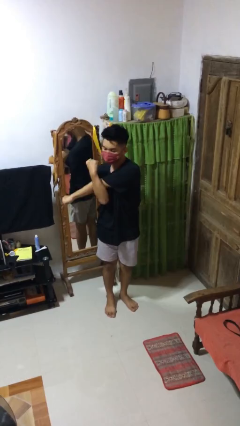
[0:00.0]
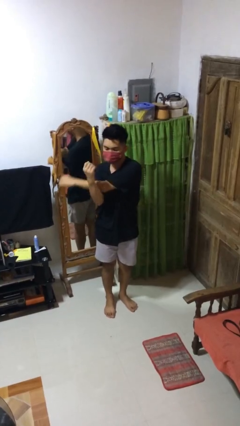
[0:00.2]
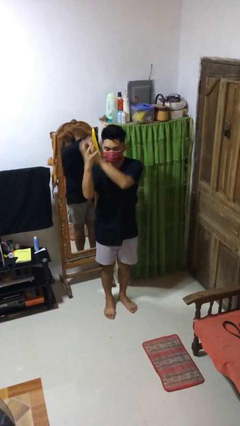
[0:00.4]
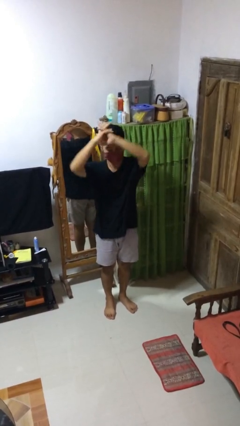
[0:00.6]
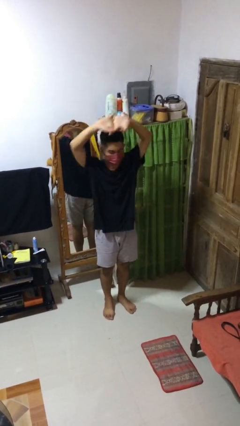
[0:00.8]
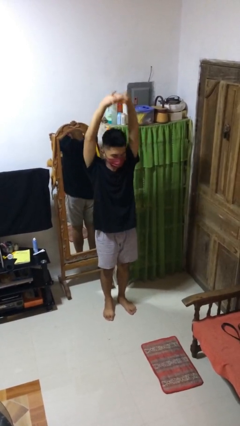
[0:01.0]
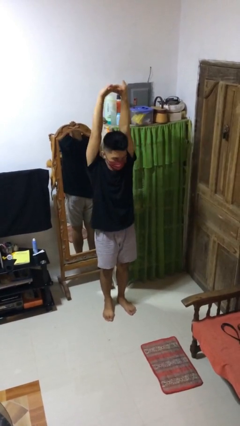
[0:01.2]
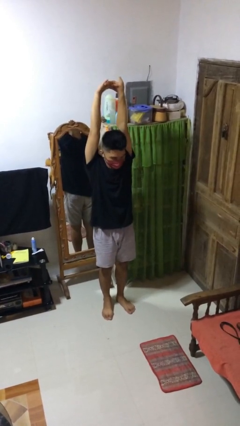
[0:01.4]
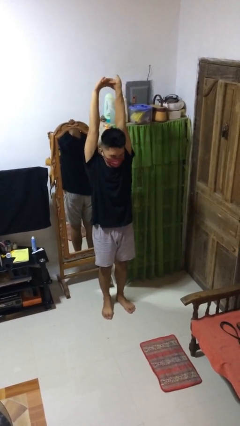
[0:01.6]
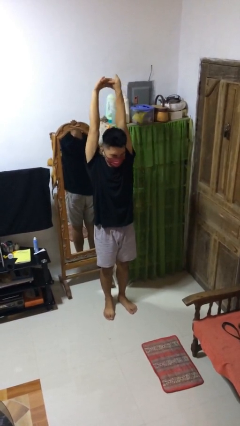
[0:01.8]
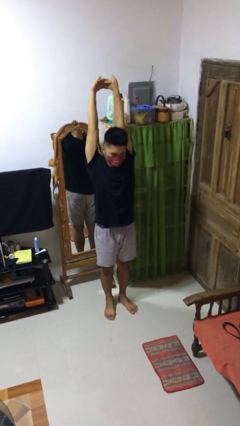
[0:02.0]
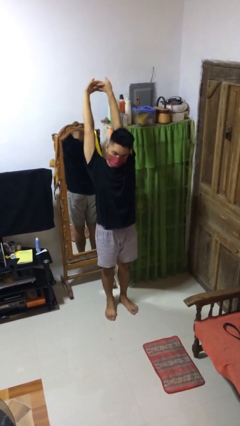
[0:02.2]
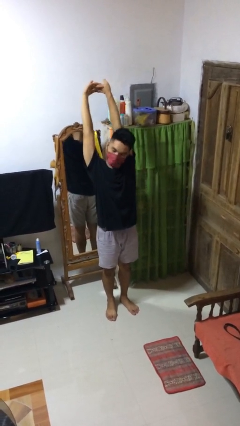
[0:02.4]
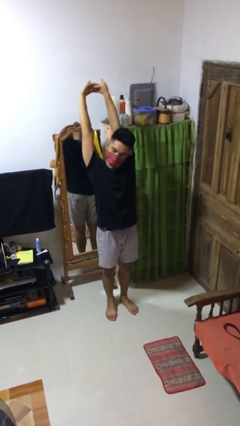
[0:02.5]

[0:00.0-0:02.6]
person stretches arms over head

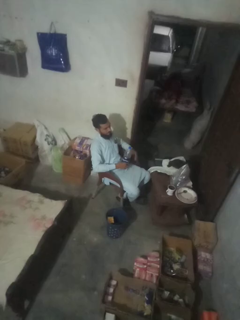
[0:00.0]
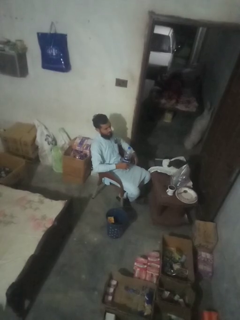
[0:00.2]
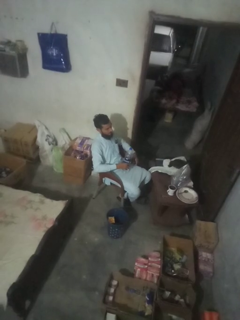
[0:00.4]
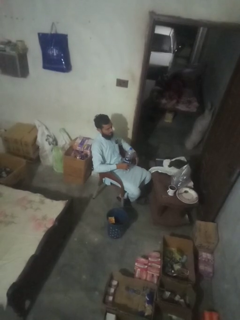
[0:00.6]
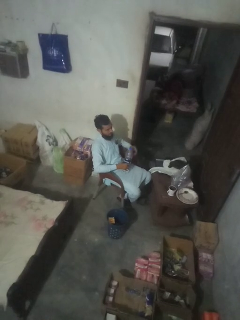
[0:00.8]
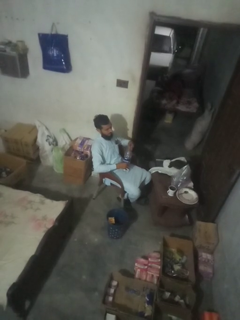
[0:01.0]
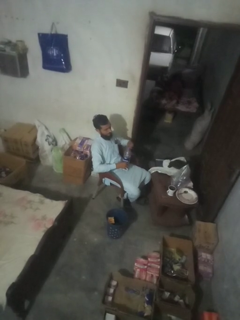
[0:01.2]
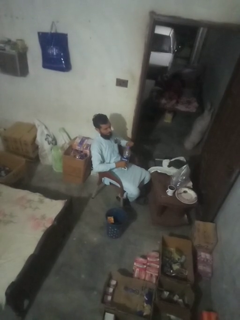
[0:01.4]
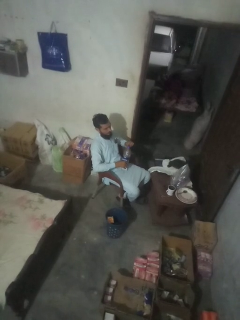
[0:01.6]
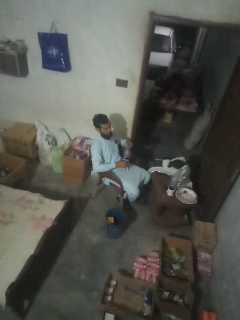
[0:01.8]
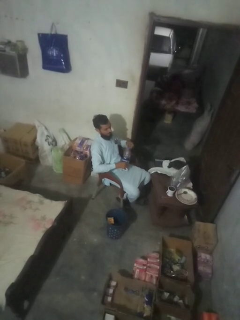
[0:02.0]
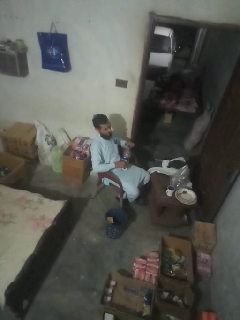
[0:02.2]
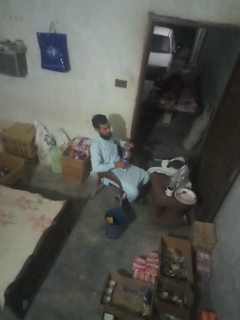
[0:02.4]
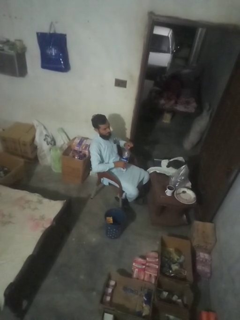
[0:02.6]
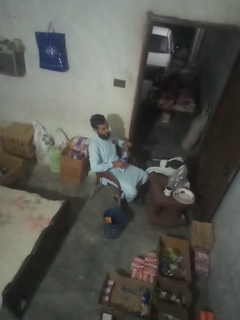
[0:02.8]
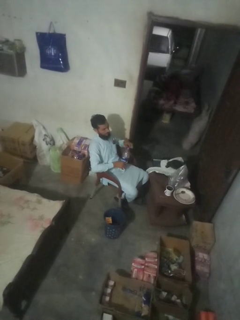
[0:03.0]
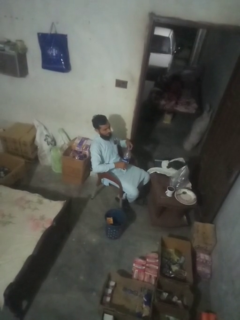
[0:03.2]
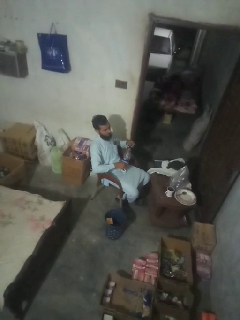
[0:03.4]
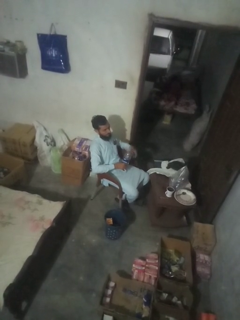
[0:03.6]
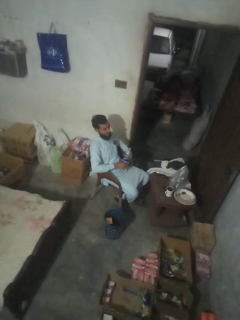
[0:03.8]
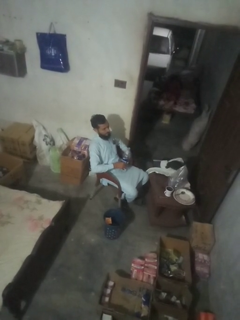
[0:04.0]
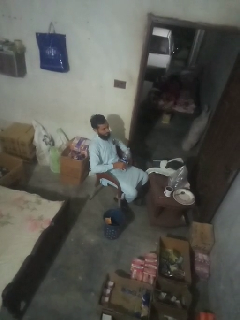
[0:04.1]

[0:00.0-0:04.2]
person unscrews lid from bottle

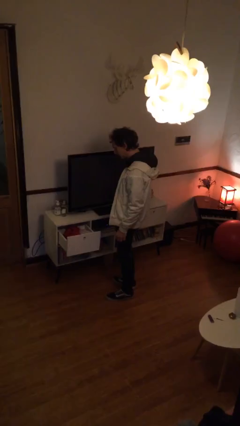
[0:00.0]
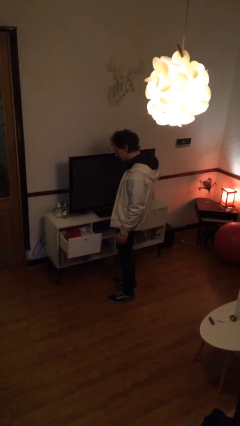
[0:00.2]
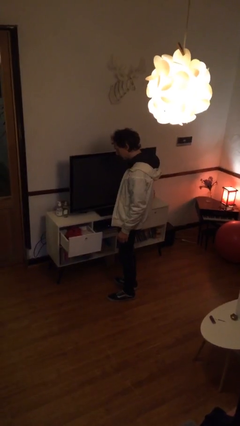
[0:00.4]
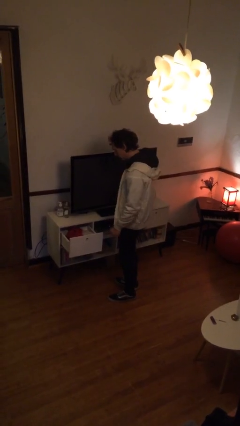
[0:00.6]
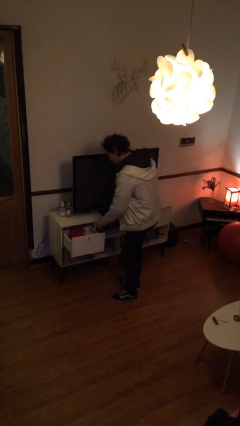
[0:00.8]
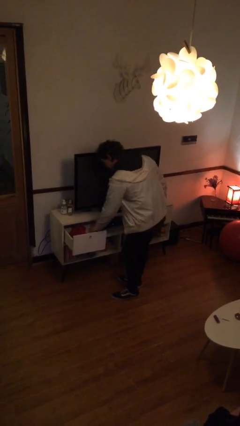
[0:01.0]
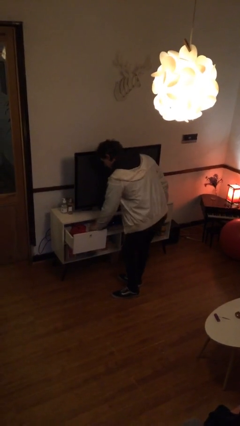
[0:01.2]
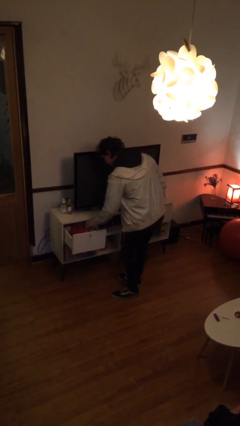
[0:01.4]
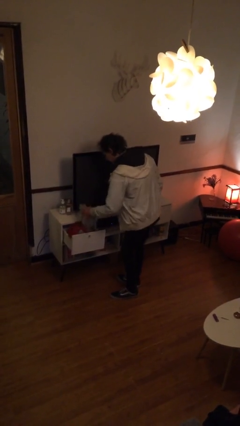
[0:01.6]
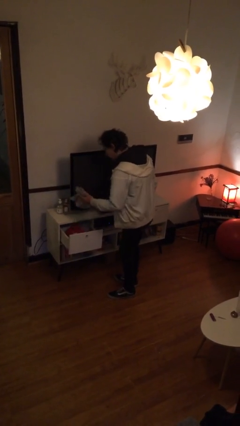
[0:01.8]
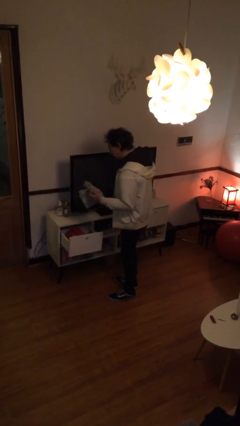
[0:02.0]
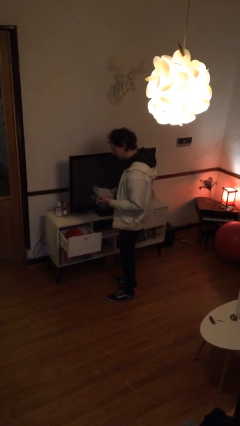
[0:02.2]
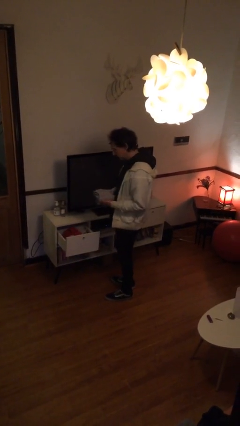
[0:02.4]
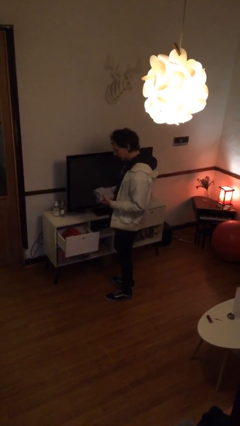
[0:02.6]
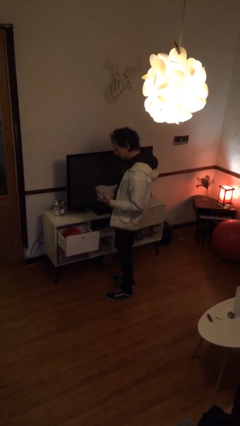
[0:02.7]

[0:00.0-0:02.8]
person takes clothes from dresser

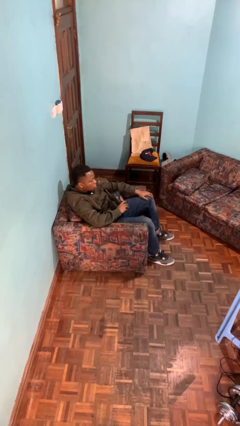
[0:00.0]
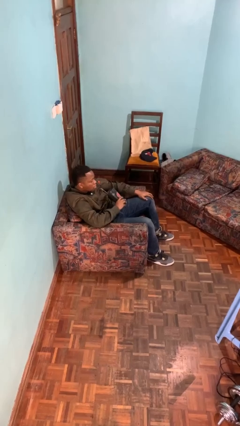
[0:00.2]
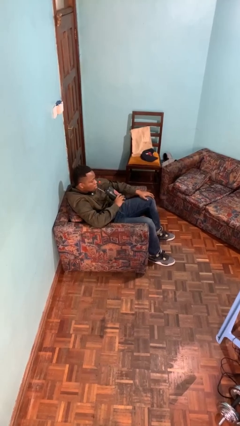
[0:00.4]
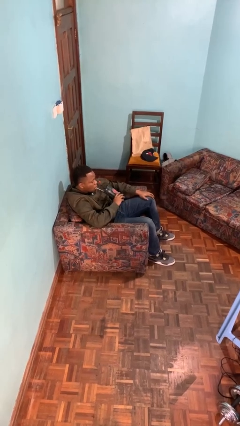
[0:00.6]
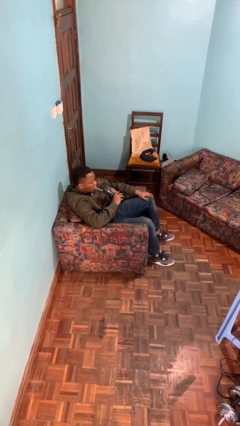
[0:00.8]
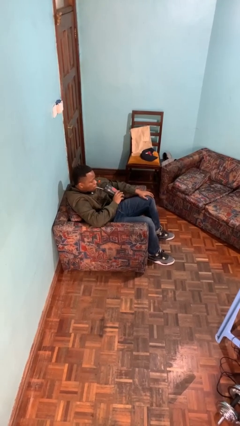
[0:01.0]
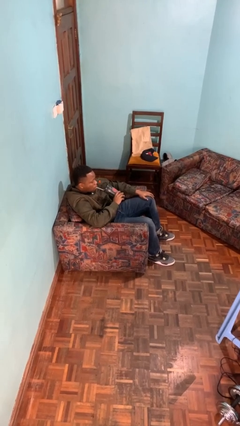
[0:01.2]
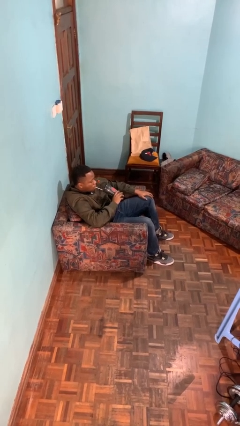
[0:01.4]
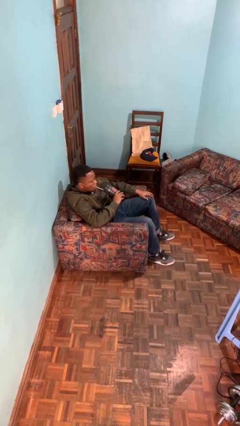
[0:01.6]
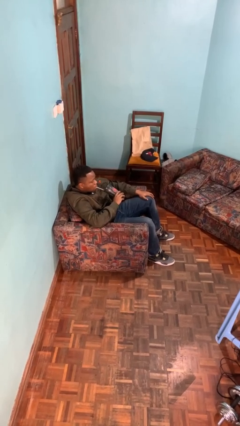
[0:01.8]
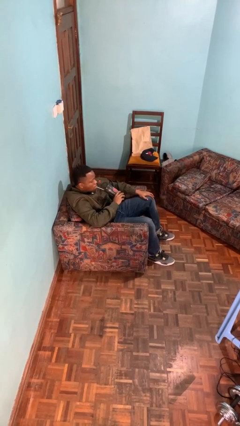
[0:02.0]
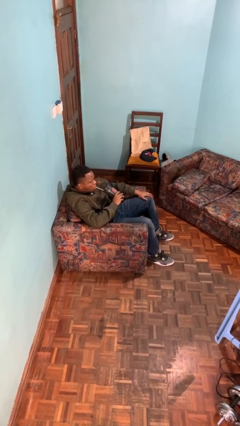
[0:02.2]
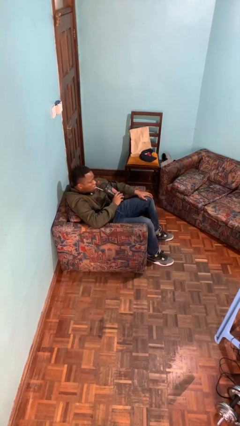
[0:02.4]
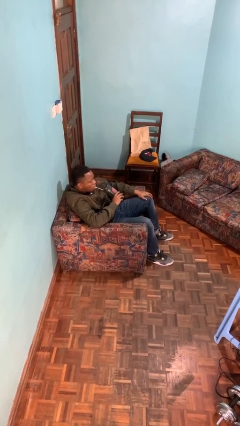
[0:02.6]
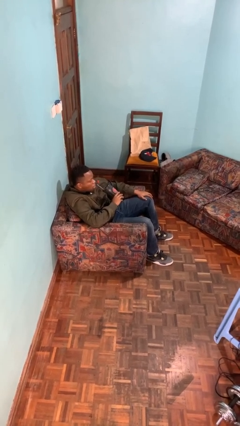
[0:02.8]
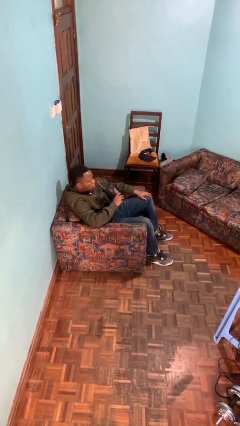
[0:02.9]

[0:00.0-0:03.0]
person drinks from straw

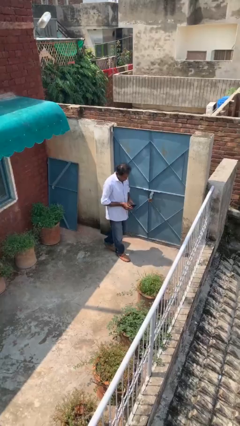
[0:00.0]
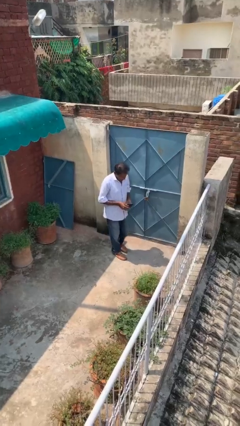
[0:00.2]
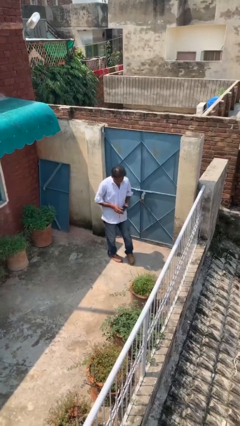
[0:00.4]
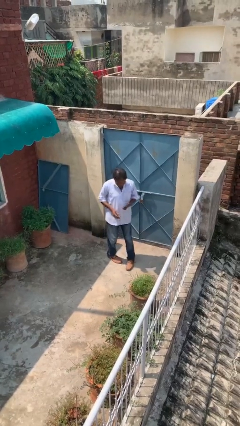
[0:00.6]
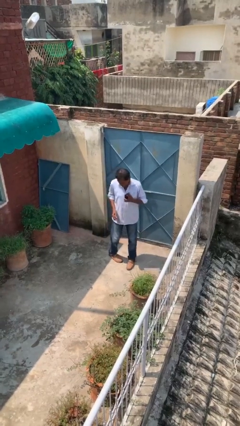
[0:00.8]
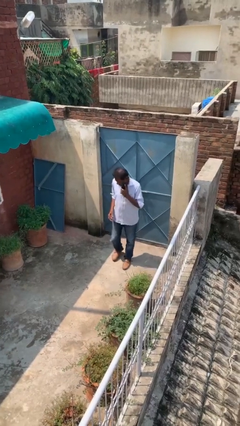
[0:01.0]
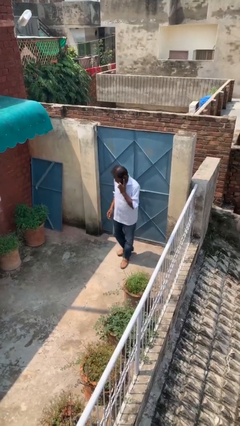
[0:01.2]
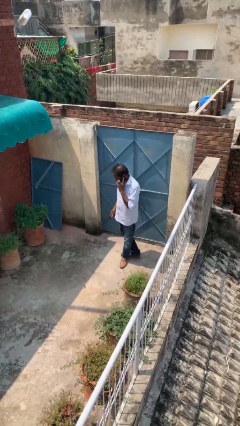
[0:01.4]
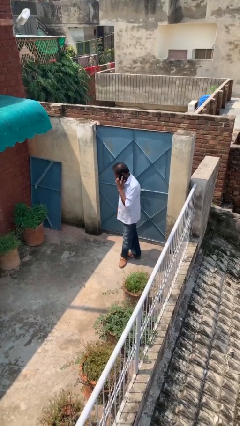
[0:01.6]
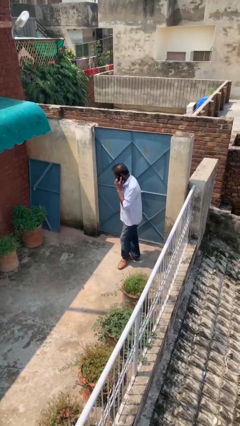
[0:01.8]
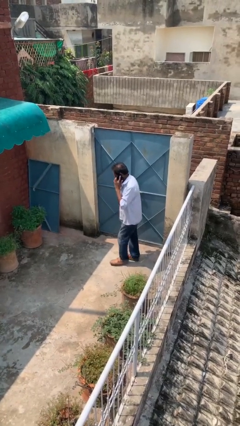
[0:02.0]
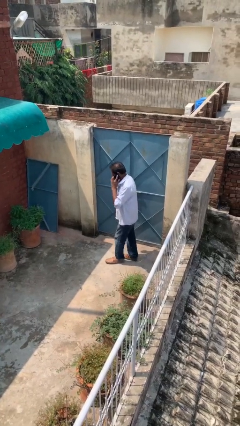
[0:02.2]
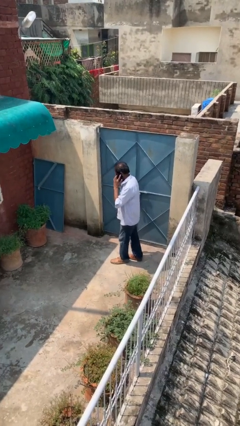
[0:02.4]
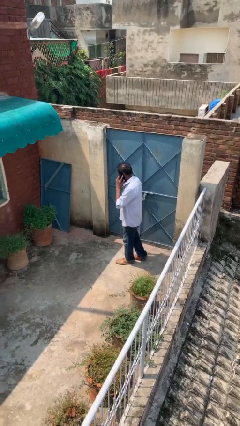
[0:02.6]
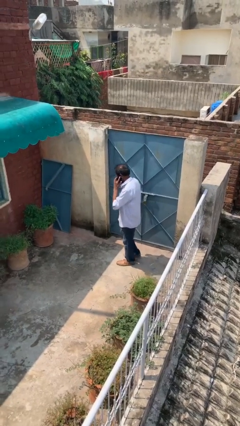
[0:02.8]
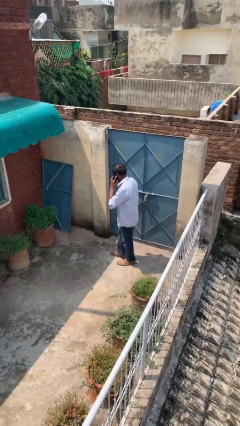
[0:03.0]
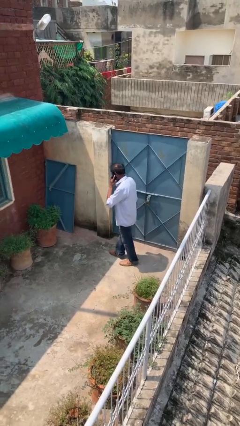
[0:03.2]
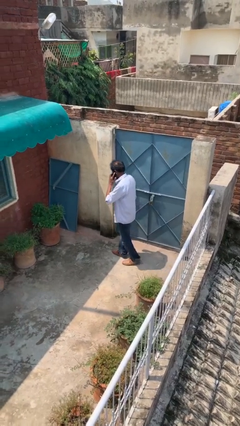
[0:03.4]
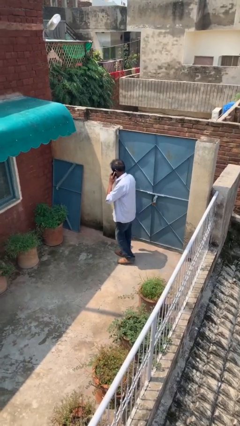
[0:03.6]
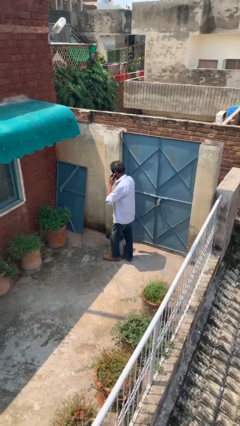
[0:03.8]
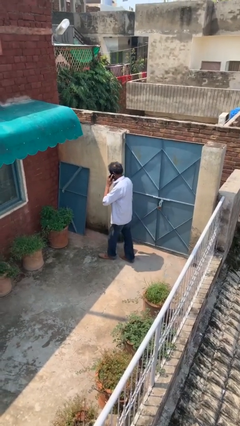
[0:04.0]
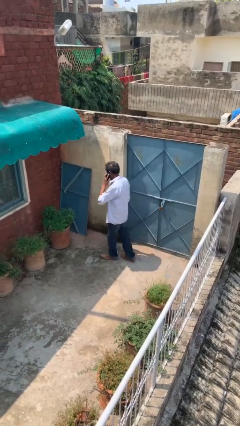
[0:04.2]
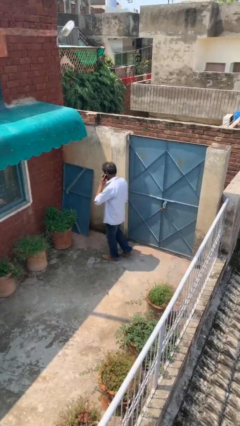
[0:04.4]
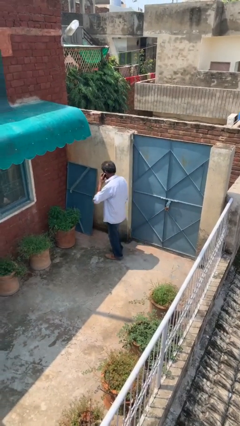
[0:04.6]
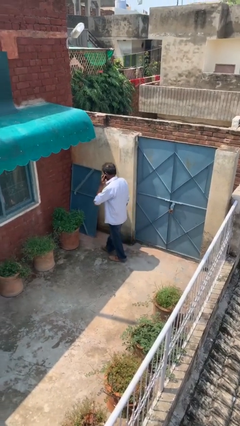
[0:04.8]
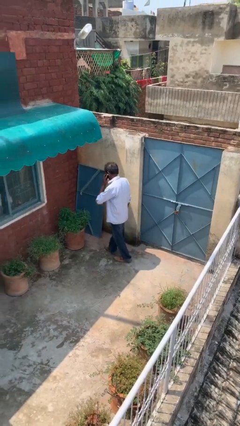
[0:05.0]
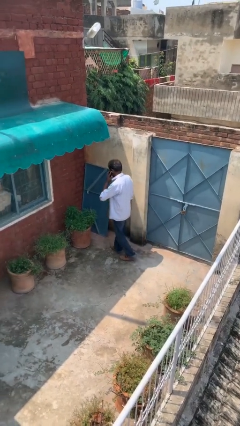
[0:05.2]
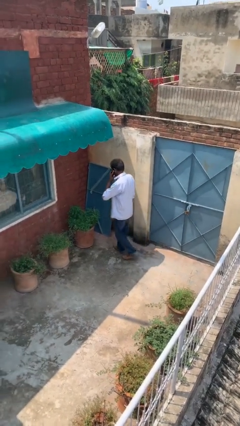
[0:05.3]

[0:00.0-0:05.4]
person talks on phone

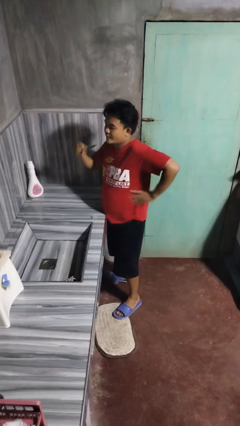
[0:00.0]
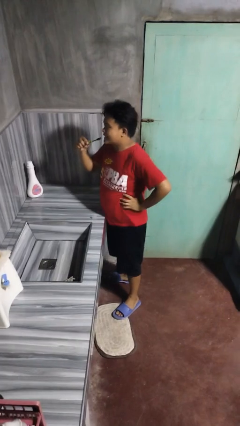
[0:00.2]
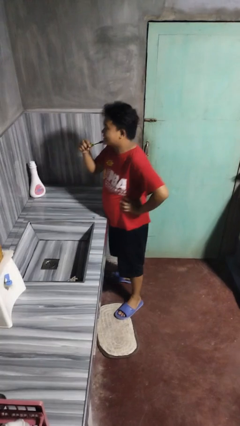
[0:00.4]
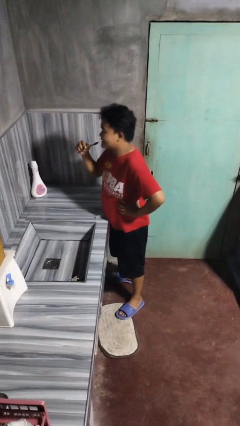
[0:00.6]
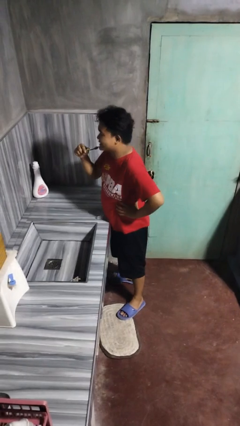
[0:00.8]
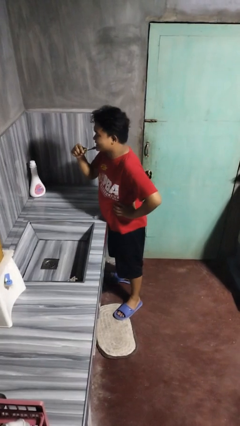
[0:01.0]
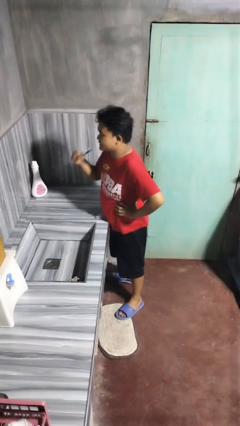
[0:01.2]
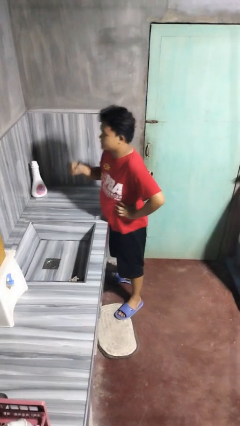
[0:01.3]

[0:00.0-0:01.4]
person brushes teeth
